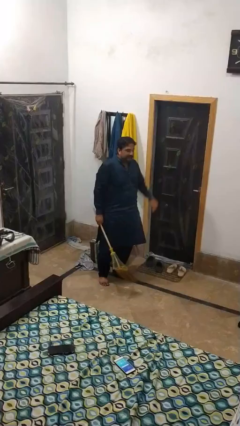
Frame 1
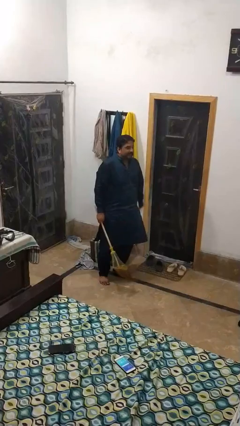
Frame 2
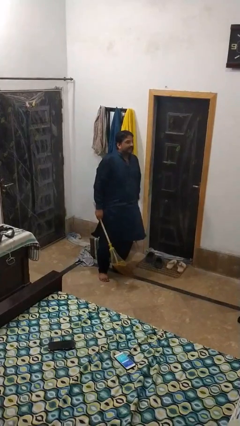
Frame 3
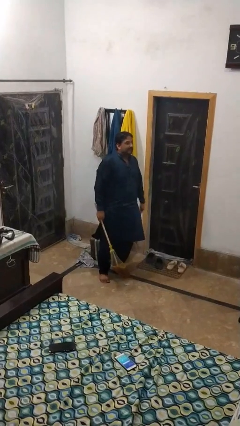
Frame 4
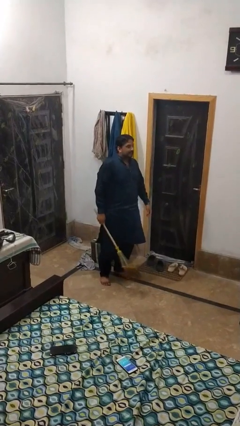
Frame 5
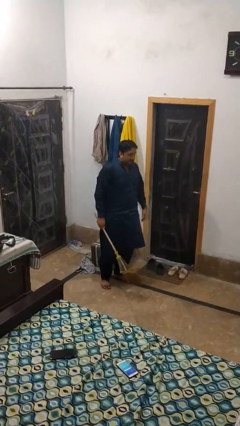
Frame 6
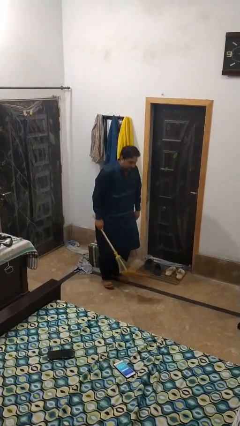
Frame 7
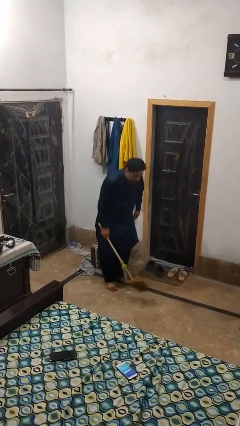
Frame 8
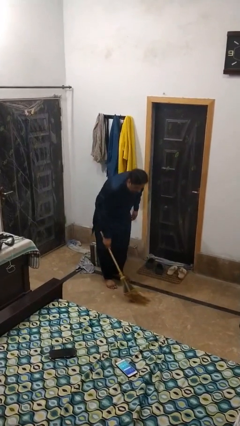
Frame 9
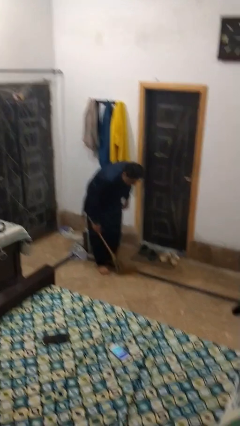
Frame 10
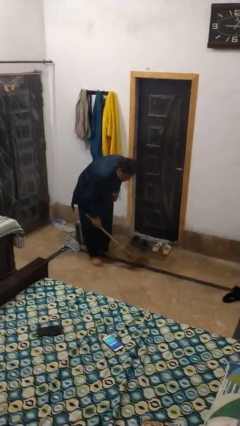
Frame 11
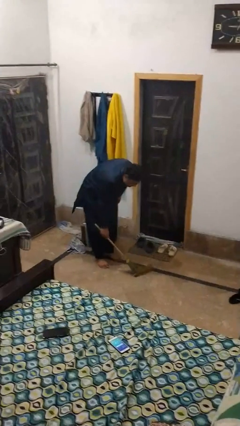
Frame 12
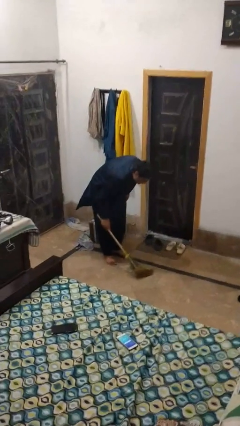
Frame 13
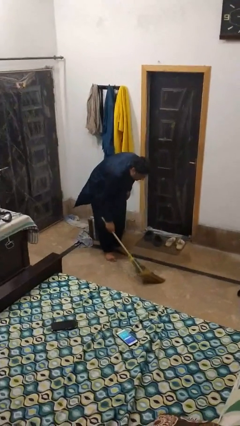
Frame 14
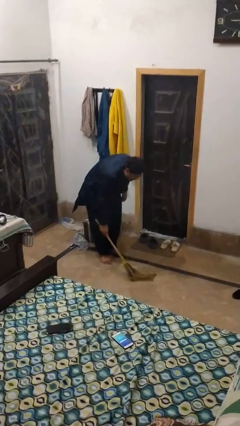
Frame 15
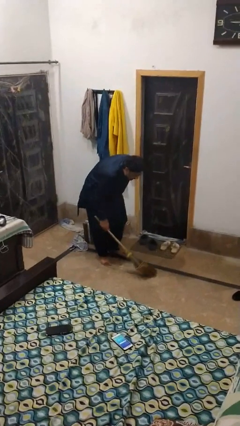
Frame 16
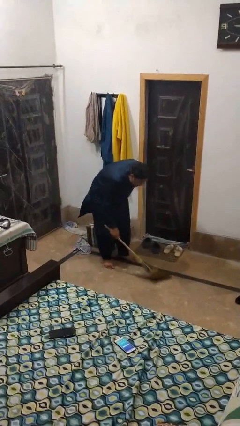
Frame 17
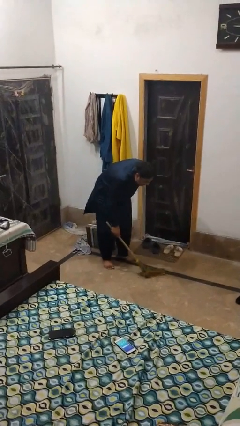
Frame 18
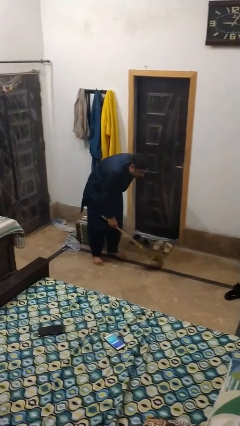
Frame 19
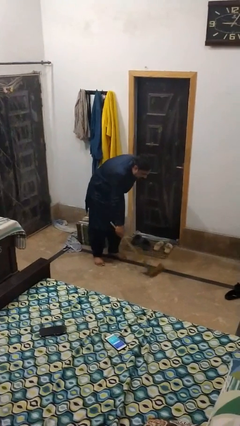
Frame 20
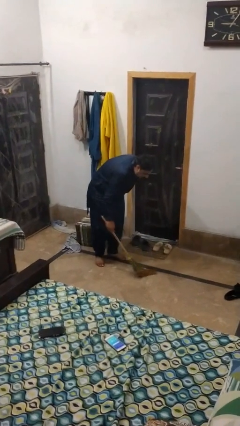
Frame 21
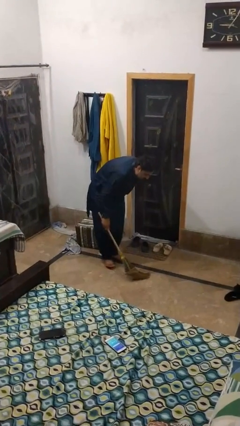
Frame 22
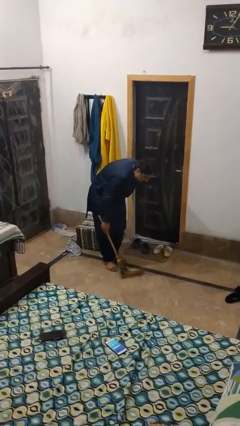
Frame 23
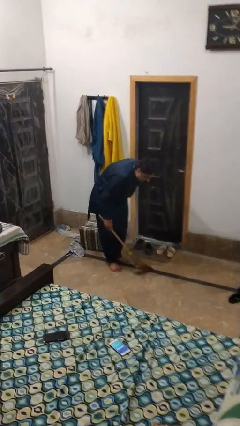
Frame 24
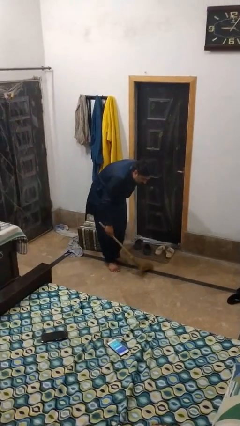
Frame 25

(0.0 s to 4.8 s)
person sweeps floor

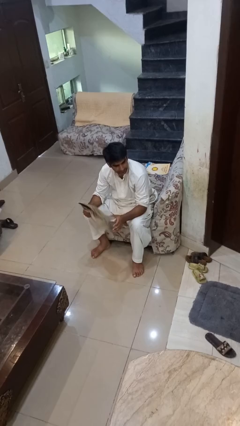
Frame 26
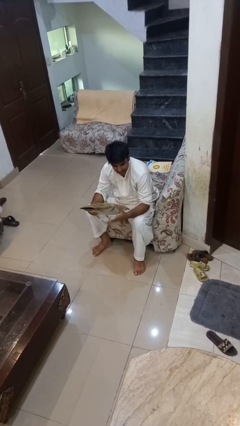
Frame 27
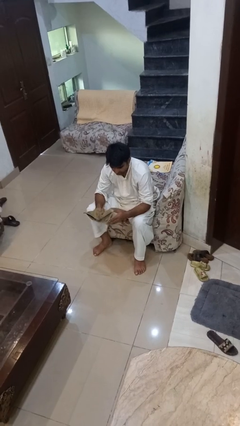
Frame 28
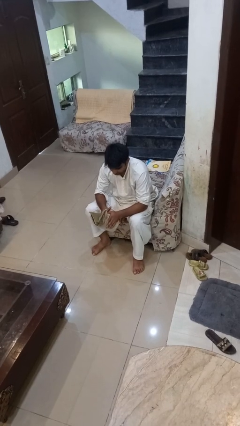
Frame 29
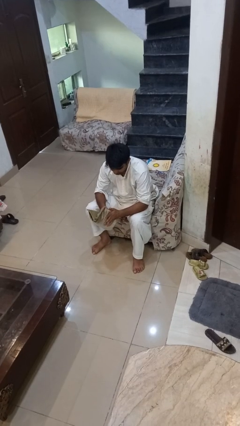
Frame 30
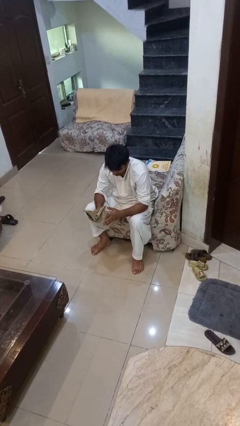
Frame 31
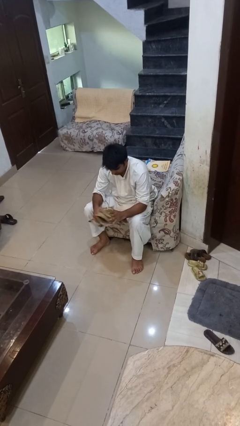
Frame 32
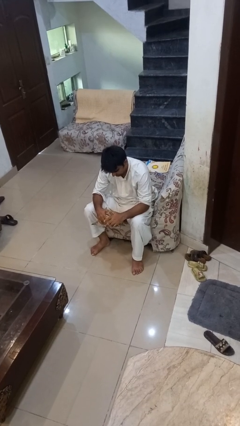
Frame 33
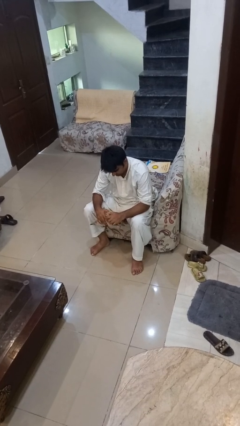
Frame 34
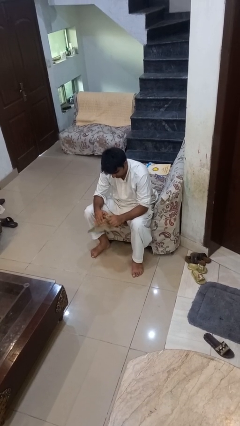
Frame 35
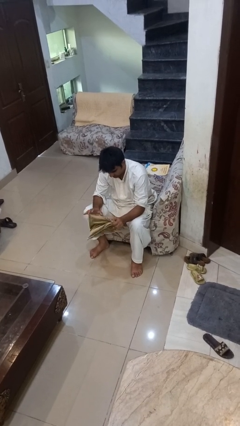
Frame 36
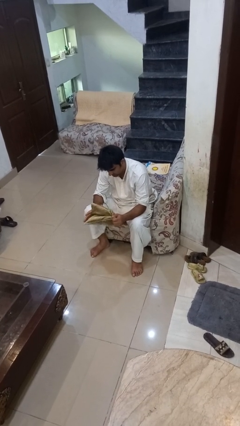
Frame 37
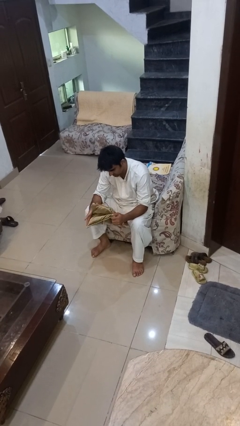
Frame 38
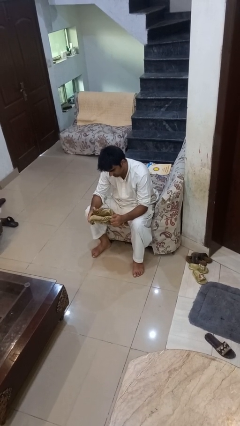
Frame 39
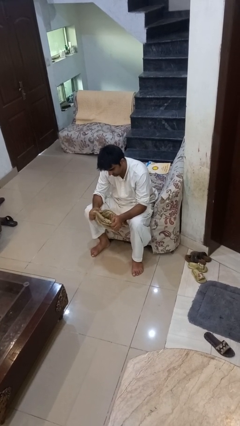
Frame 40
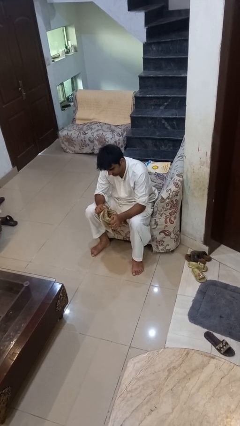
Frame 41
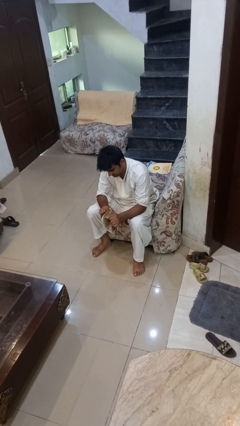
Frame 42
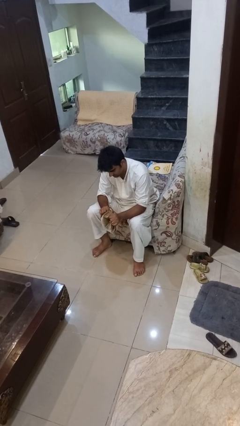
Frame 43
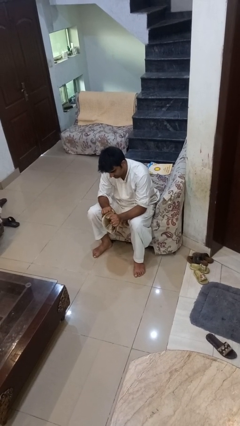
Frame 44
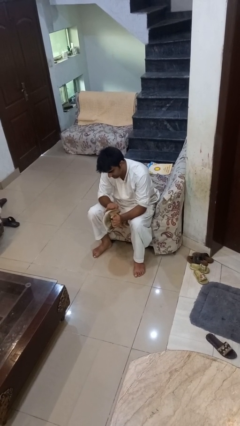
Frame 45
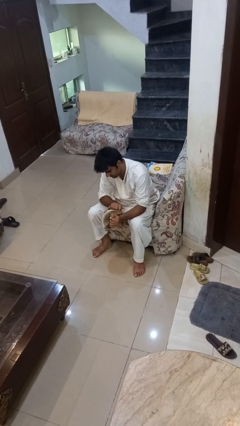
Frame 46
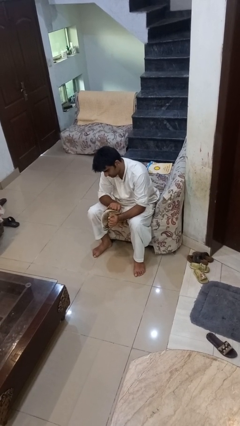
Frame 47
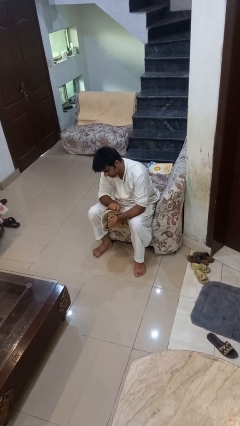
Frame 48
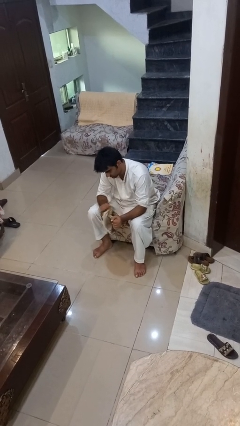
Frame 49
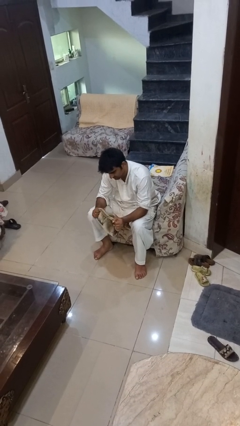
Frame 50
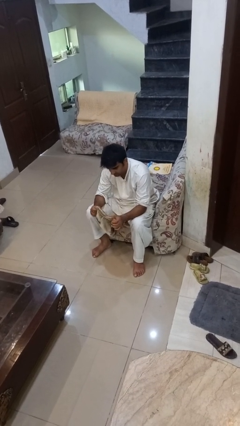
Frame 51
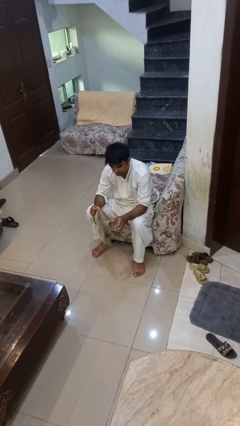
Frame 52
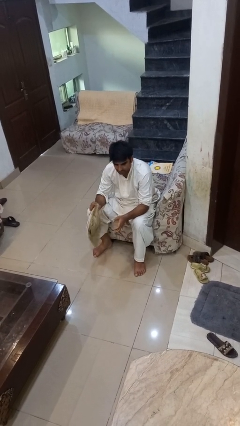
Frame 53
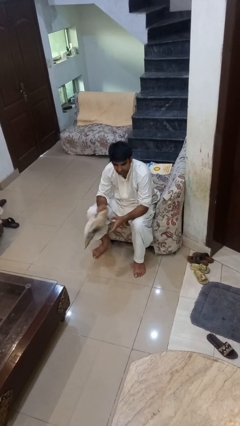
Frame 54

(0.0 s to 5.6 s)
person squeezes object

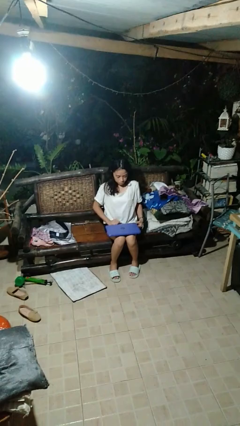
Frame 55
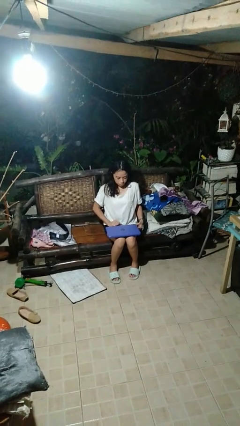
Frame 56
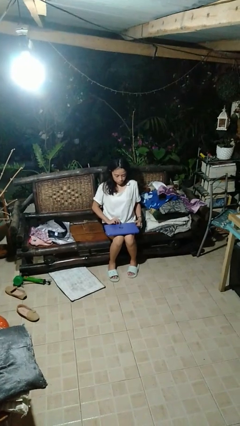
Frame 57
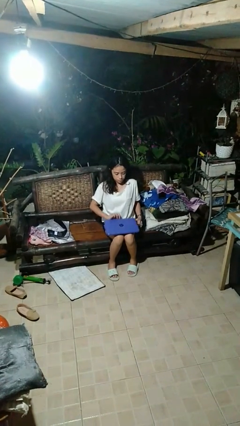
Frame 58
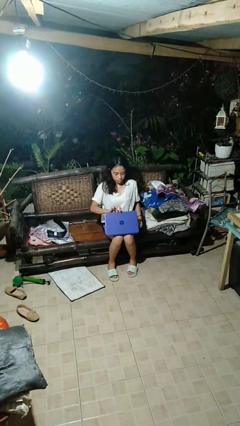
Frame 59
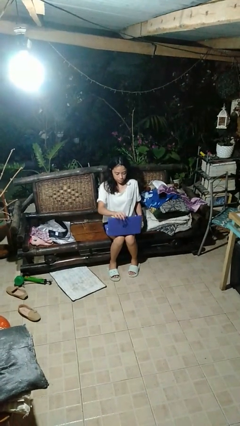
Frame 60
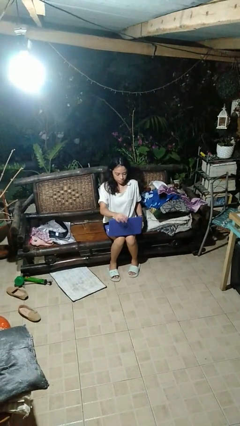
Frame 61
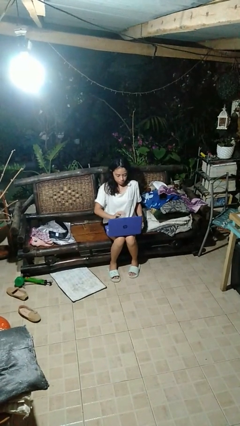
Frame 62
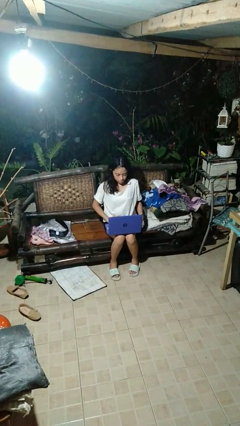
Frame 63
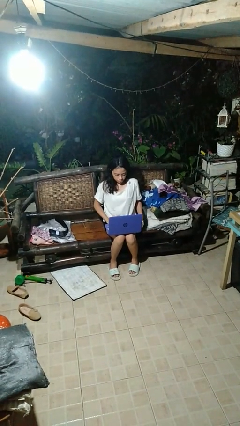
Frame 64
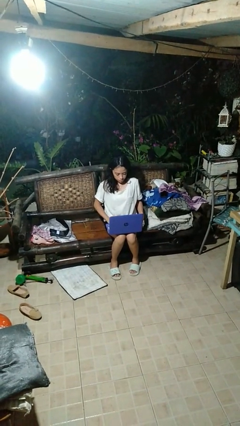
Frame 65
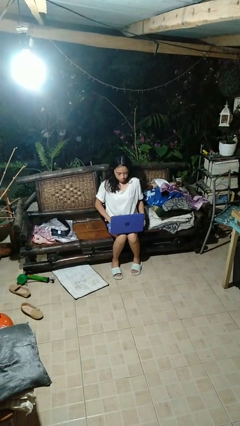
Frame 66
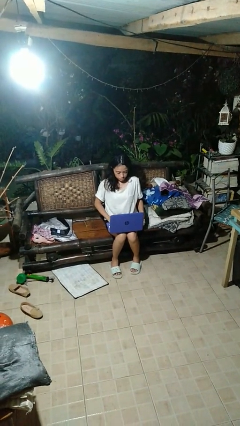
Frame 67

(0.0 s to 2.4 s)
person opens laptop

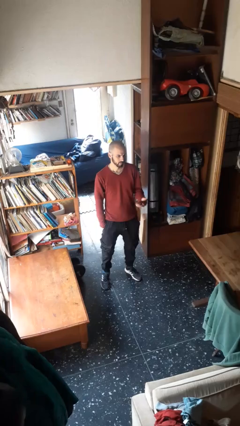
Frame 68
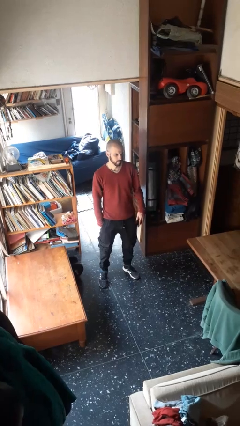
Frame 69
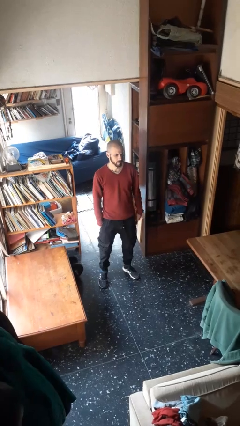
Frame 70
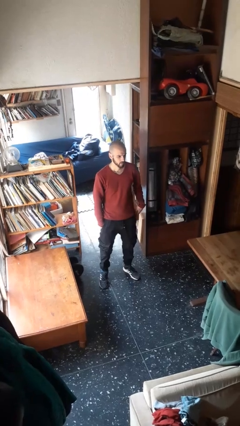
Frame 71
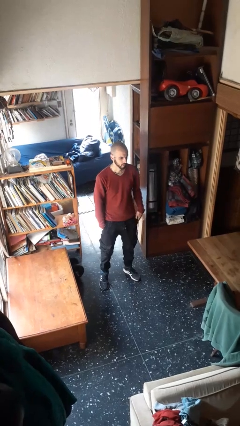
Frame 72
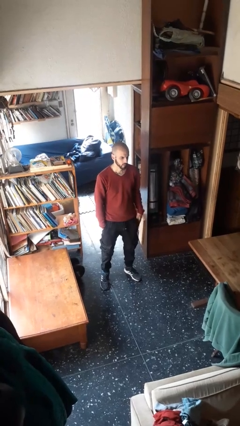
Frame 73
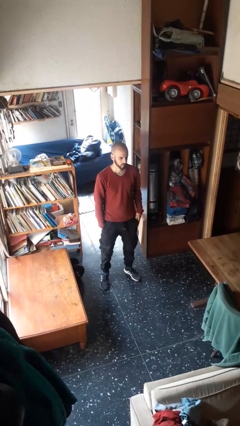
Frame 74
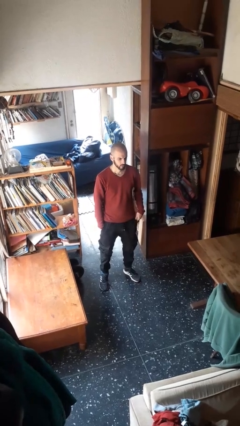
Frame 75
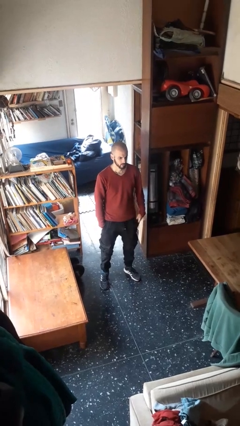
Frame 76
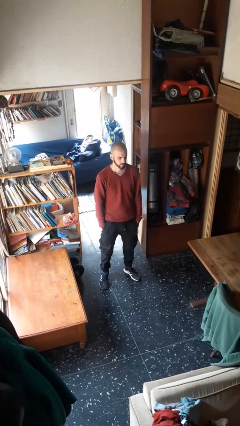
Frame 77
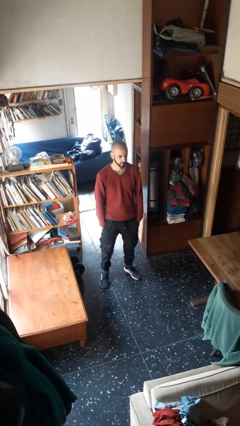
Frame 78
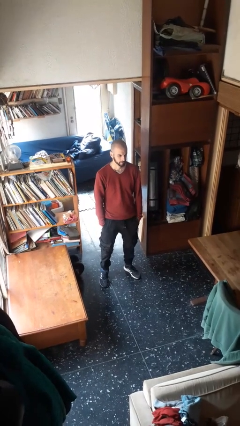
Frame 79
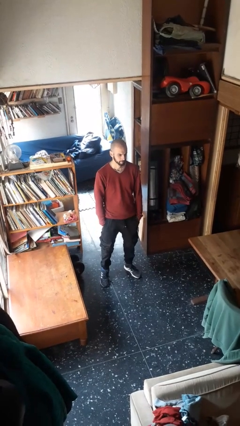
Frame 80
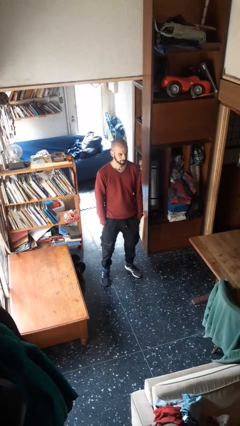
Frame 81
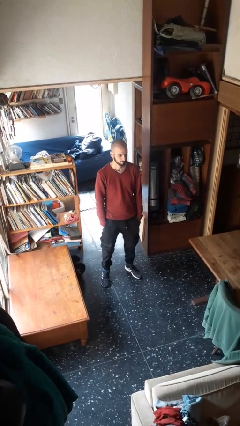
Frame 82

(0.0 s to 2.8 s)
person puts phone into pocket

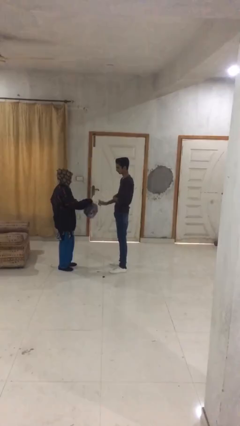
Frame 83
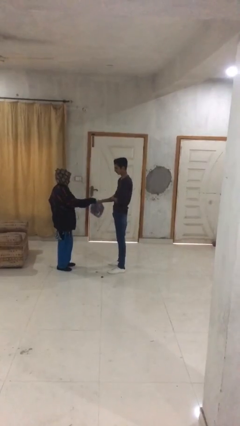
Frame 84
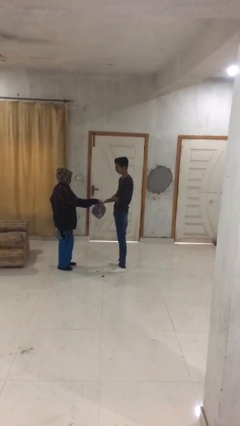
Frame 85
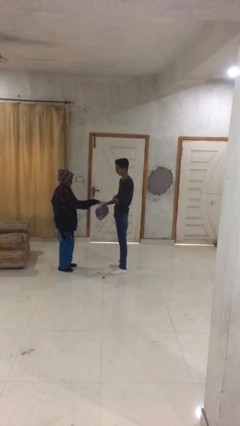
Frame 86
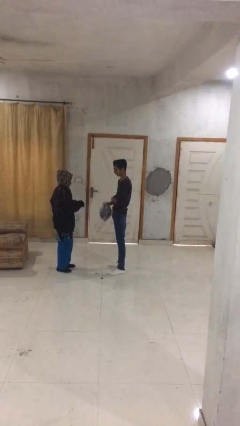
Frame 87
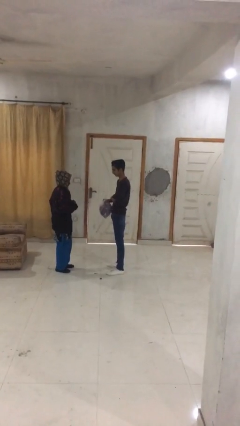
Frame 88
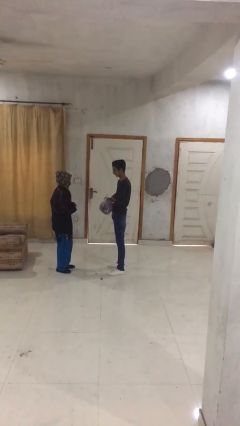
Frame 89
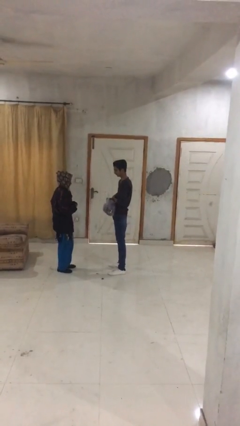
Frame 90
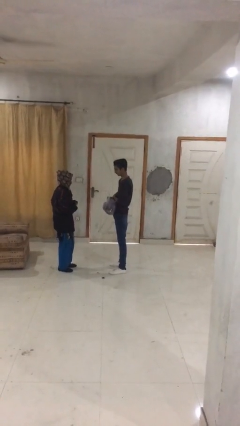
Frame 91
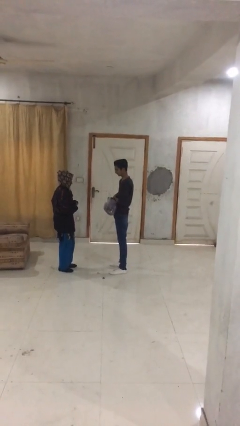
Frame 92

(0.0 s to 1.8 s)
person transfers object to person
